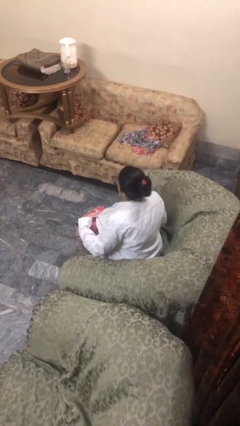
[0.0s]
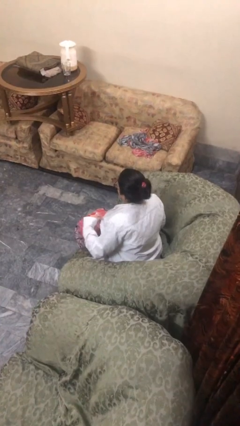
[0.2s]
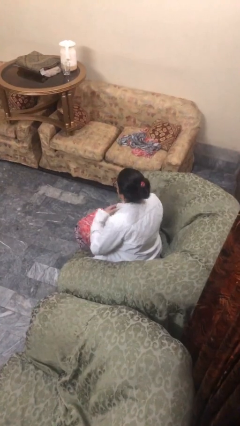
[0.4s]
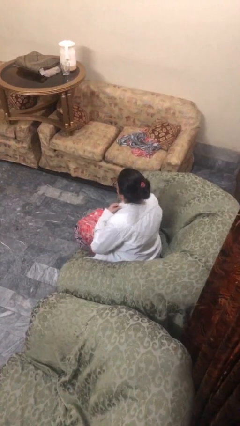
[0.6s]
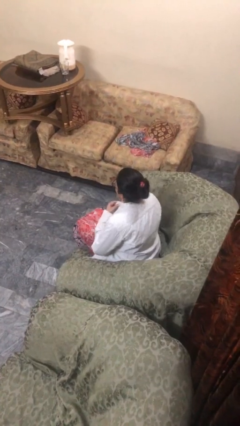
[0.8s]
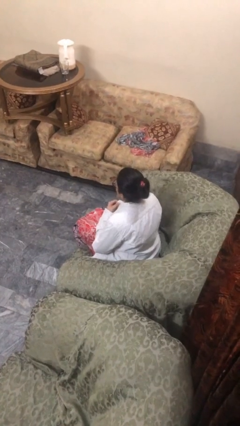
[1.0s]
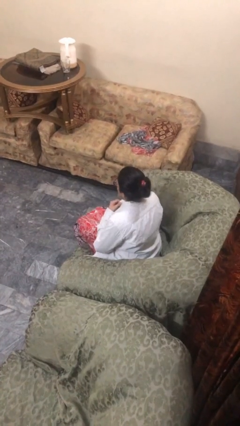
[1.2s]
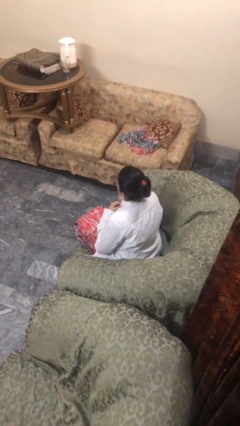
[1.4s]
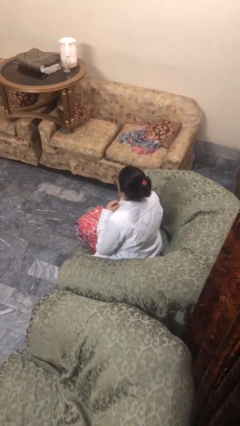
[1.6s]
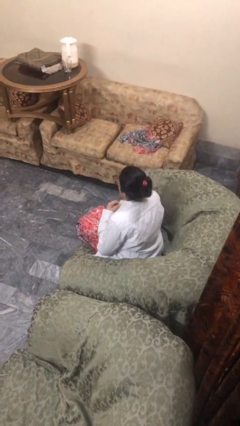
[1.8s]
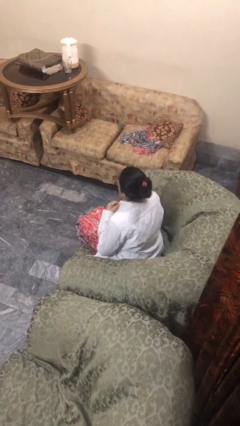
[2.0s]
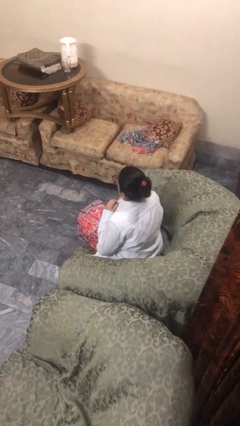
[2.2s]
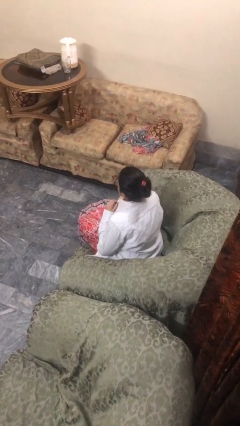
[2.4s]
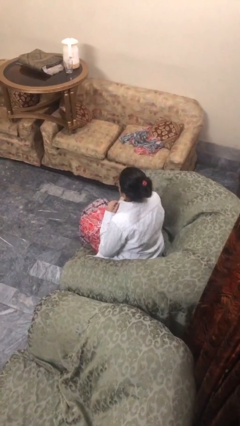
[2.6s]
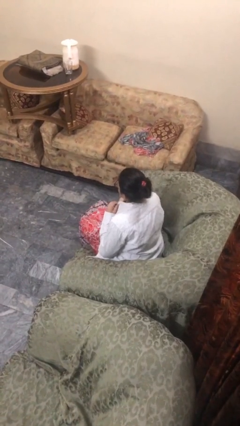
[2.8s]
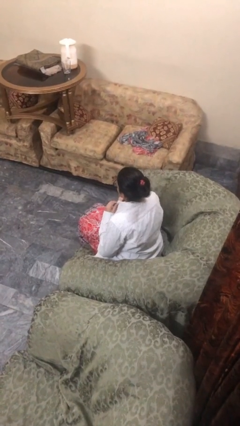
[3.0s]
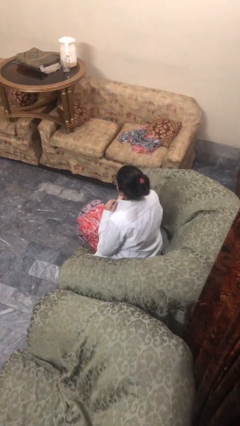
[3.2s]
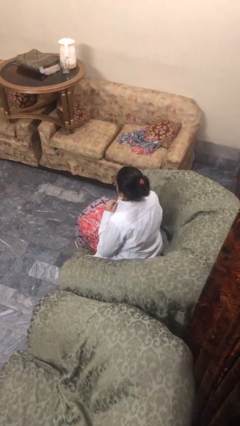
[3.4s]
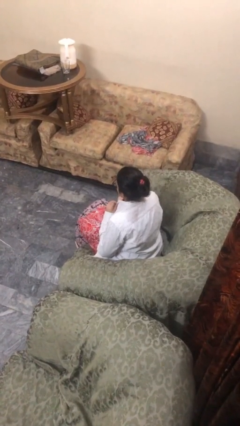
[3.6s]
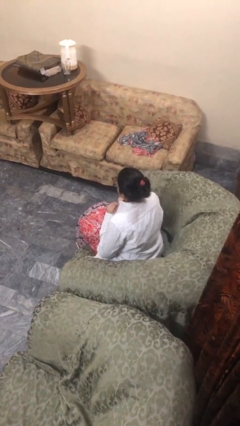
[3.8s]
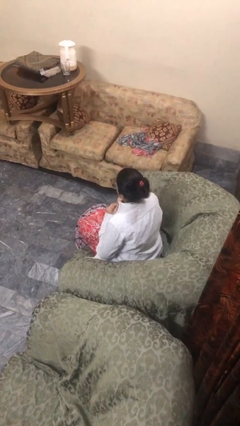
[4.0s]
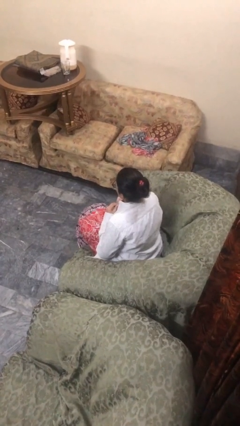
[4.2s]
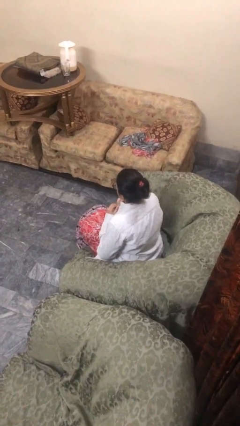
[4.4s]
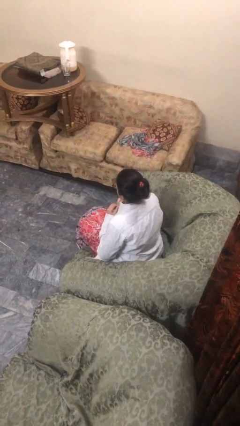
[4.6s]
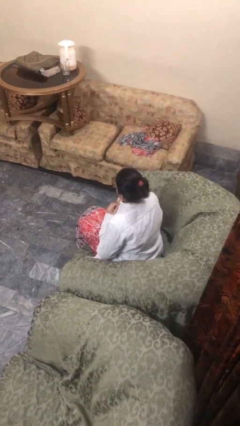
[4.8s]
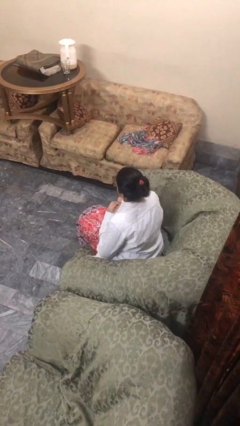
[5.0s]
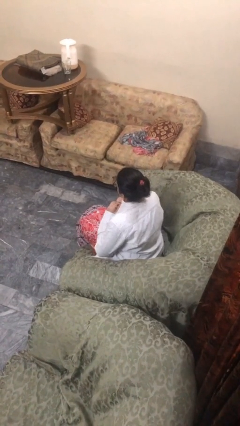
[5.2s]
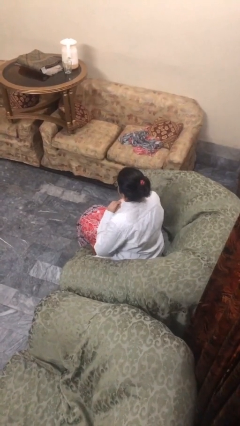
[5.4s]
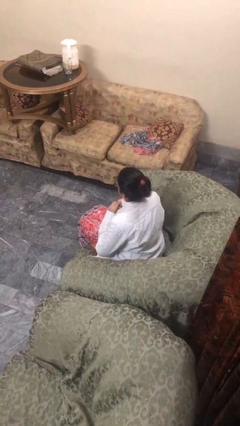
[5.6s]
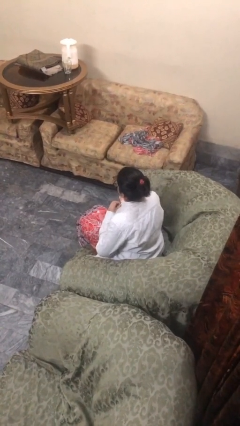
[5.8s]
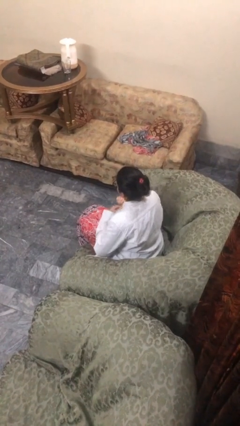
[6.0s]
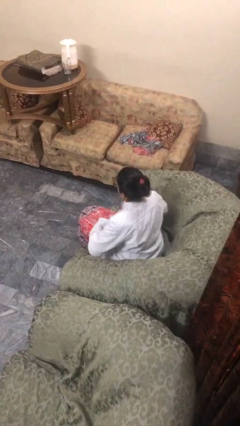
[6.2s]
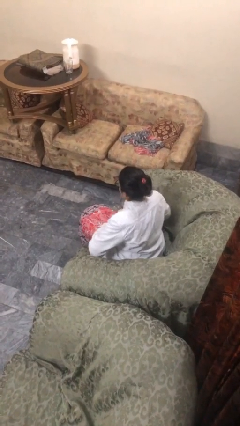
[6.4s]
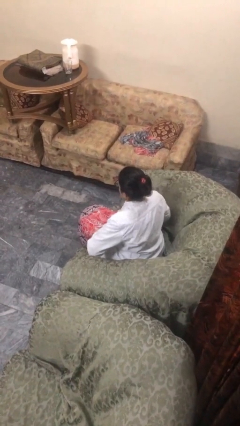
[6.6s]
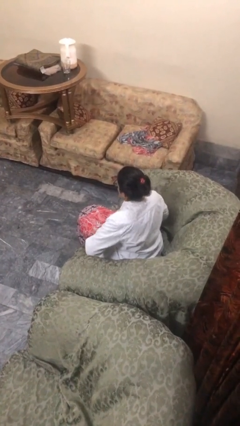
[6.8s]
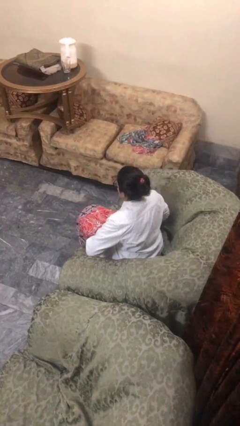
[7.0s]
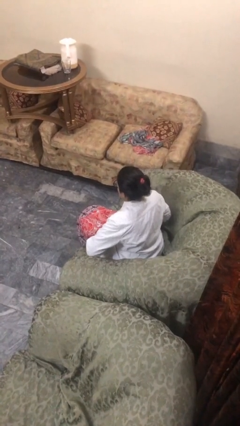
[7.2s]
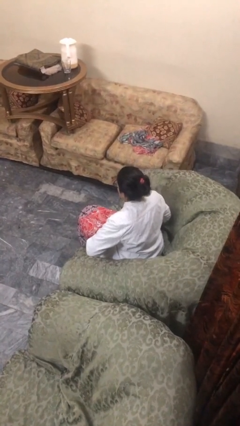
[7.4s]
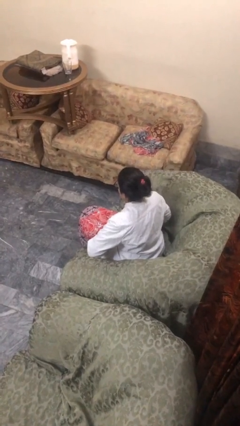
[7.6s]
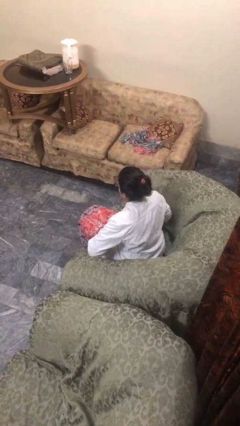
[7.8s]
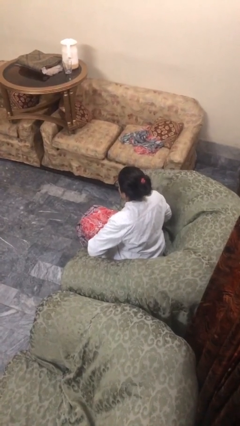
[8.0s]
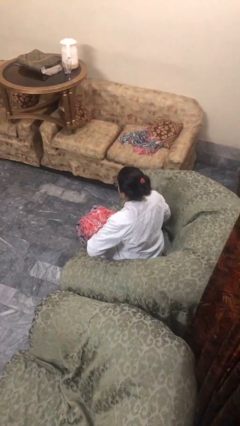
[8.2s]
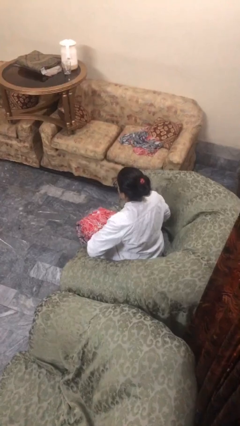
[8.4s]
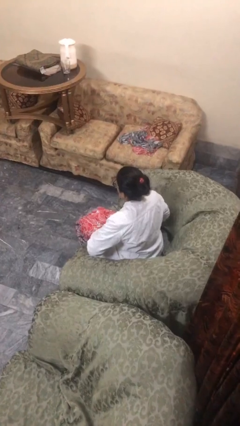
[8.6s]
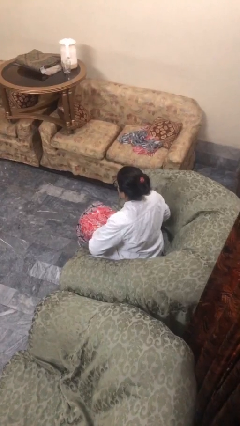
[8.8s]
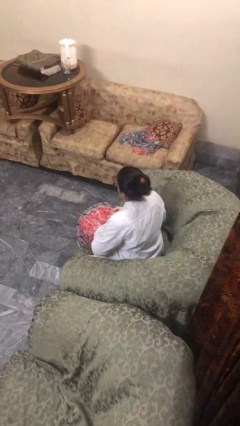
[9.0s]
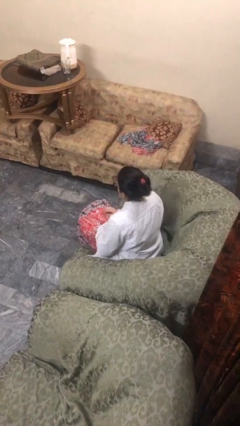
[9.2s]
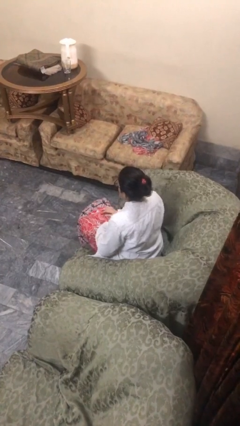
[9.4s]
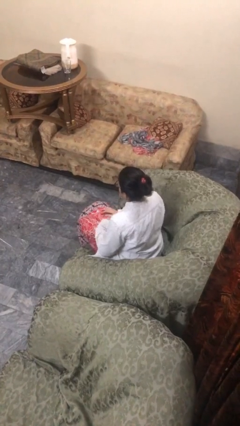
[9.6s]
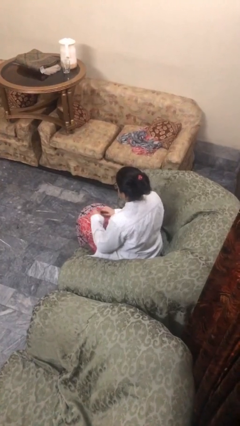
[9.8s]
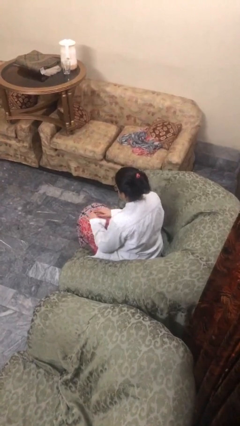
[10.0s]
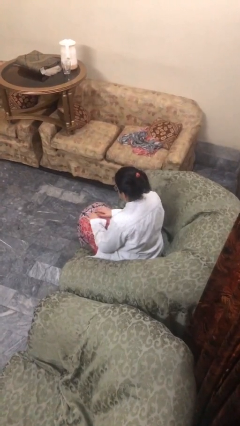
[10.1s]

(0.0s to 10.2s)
person buttons shirt

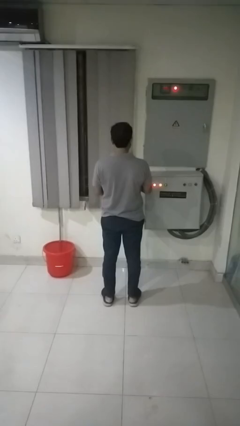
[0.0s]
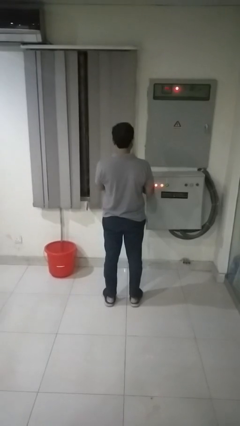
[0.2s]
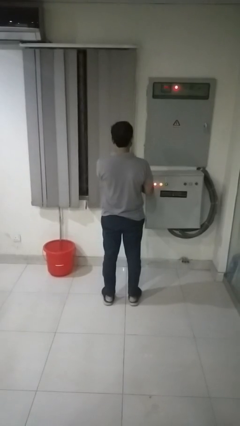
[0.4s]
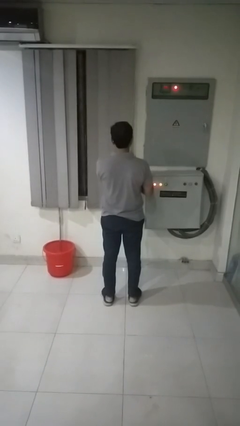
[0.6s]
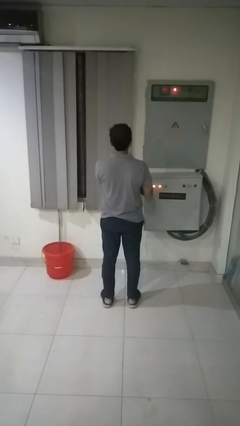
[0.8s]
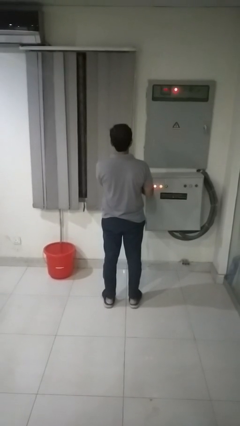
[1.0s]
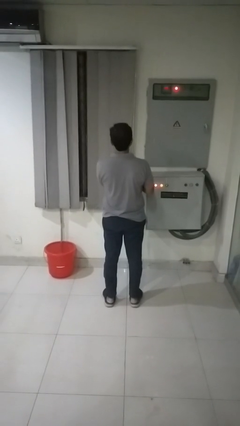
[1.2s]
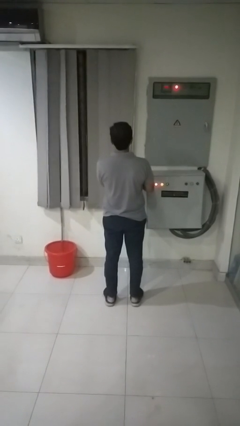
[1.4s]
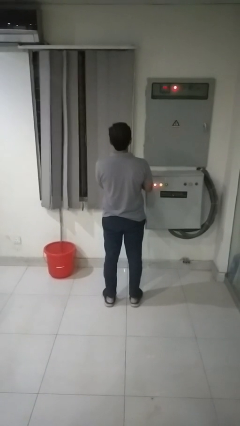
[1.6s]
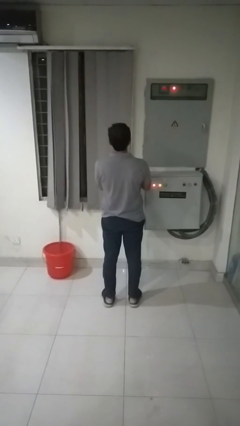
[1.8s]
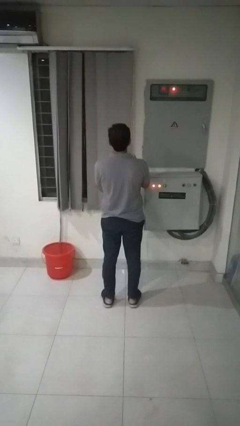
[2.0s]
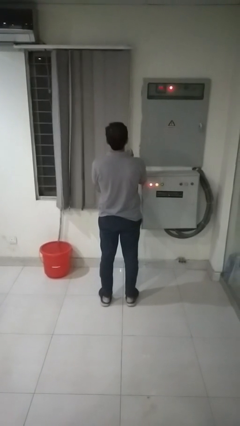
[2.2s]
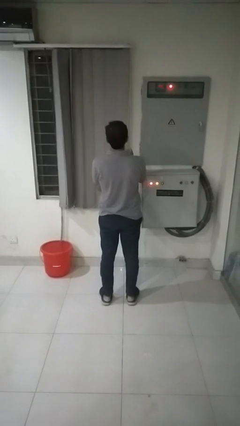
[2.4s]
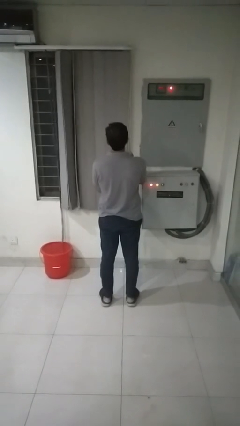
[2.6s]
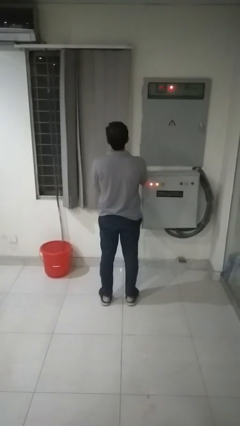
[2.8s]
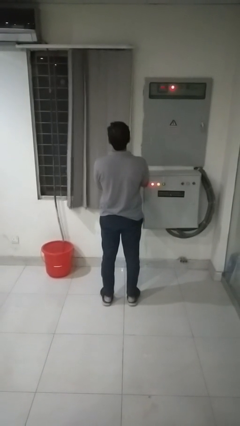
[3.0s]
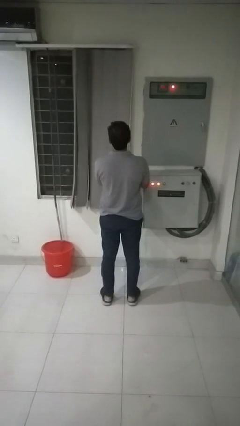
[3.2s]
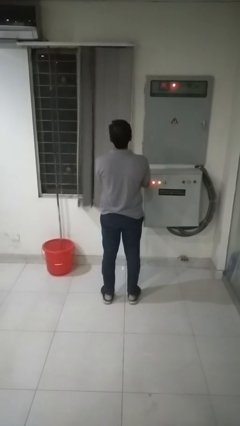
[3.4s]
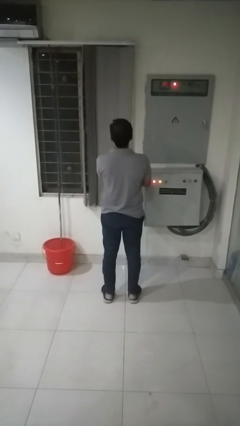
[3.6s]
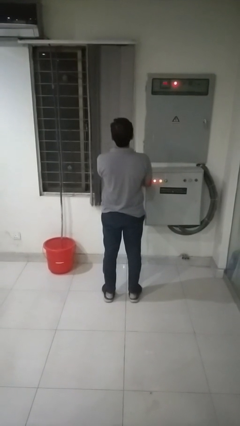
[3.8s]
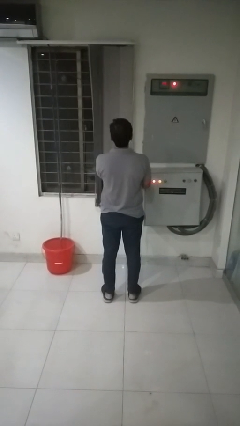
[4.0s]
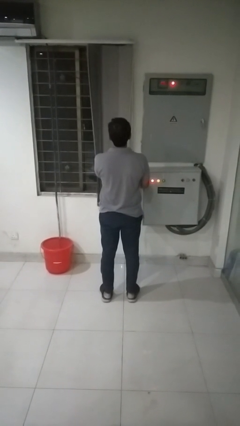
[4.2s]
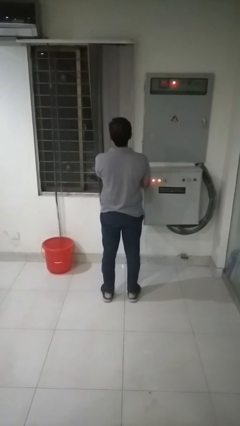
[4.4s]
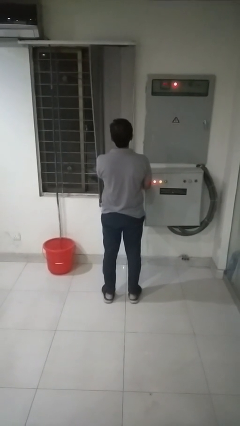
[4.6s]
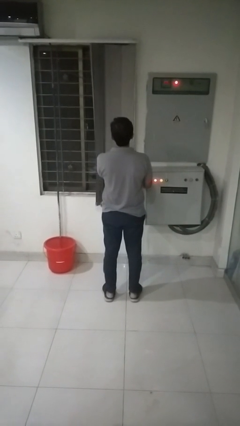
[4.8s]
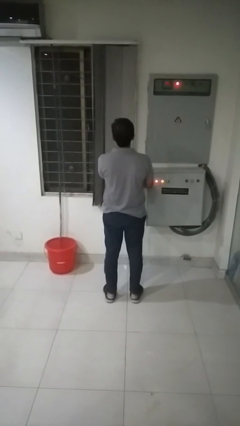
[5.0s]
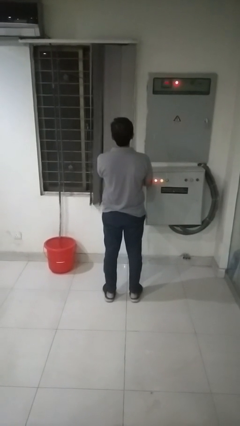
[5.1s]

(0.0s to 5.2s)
person opens curtains

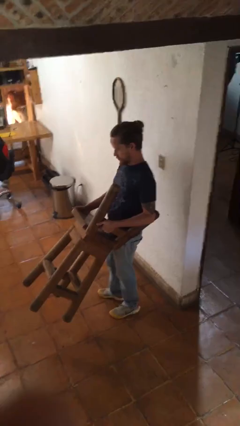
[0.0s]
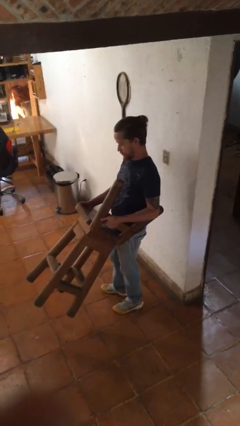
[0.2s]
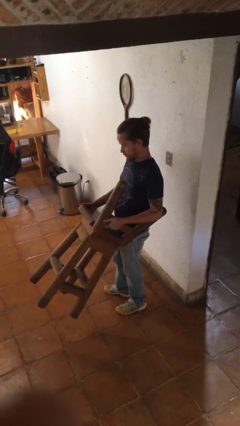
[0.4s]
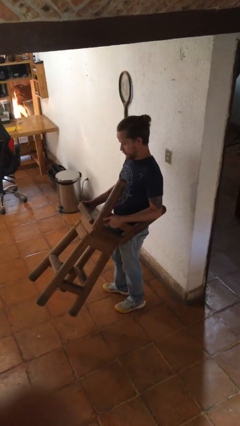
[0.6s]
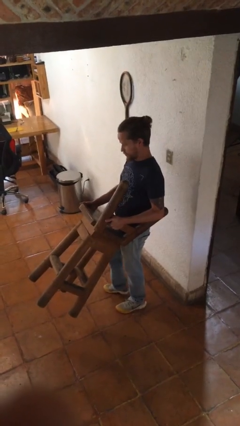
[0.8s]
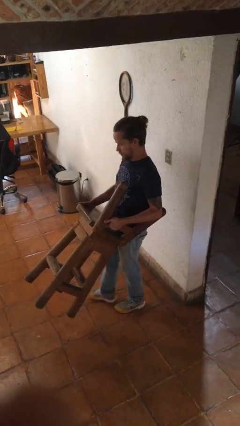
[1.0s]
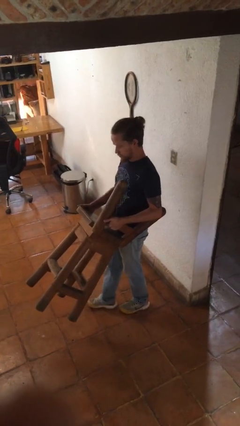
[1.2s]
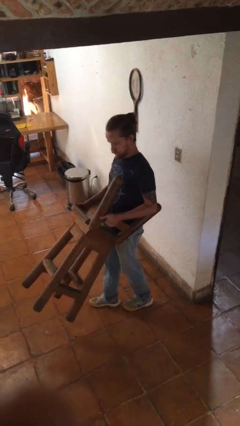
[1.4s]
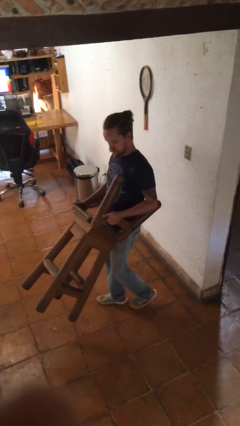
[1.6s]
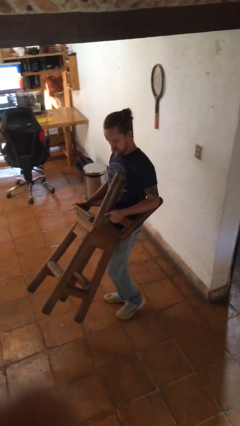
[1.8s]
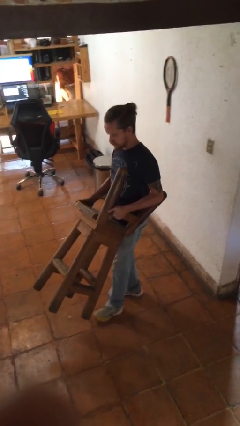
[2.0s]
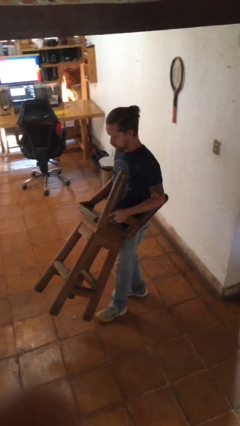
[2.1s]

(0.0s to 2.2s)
person carries furniture

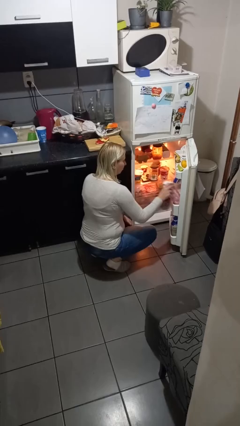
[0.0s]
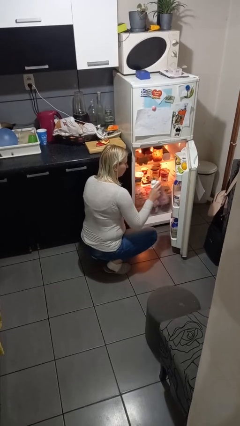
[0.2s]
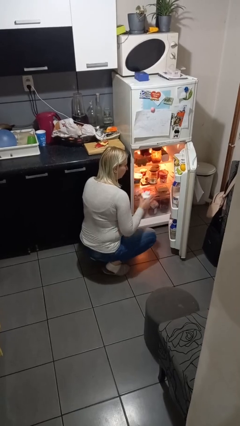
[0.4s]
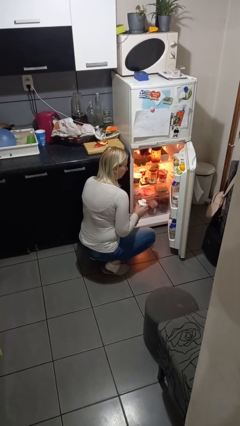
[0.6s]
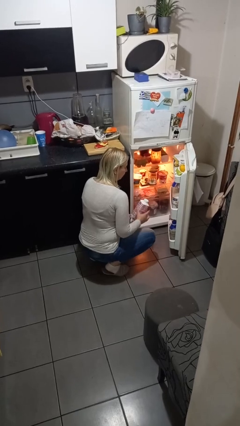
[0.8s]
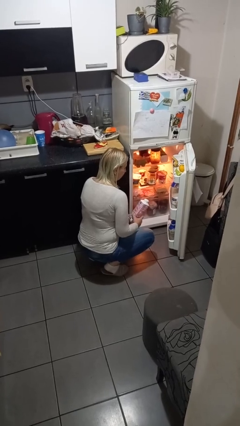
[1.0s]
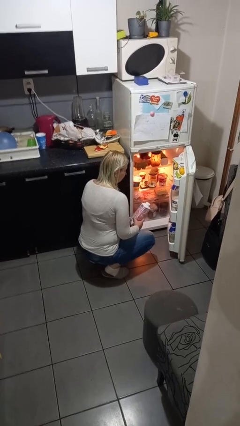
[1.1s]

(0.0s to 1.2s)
person takes object from refrigerator
